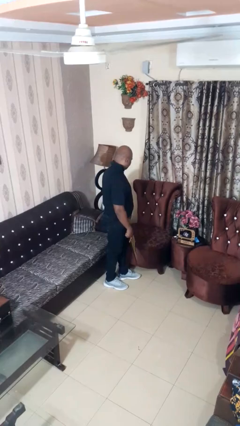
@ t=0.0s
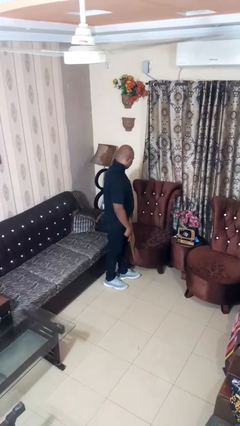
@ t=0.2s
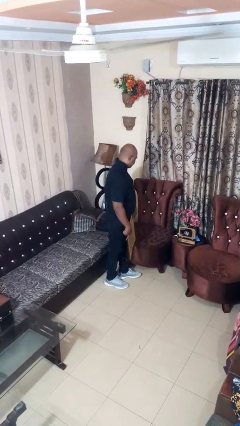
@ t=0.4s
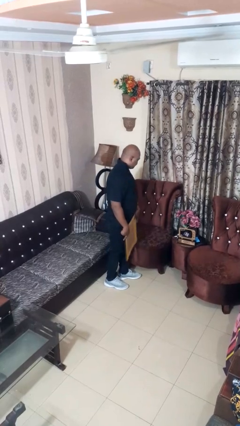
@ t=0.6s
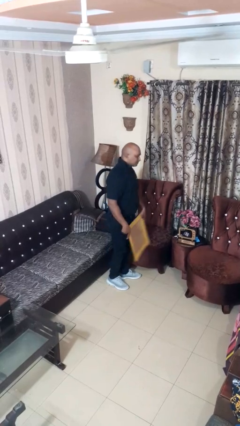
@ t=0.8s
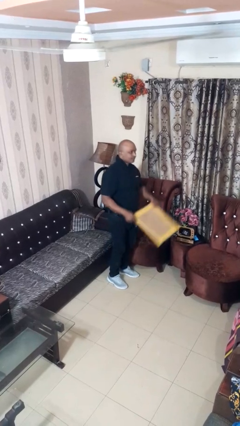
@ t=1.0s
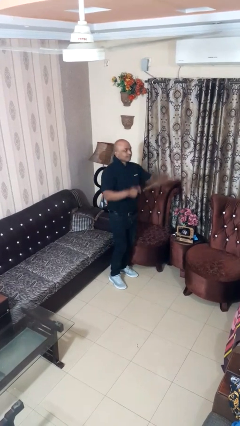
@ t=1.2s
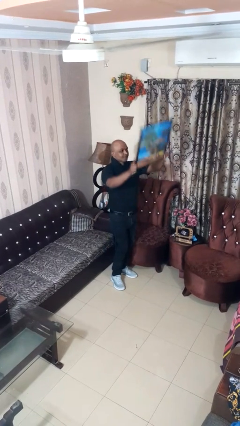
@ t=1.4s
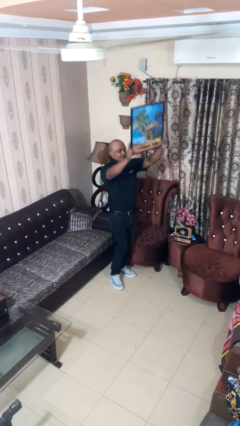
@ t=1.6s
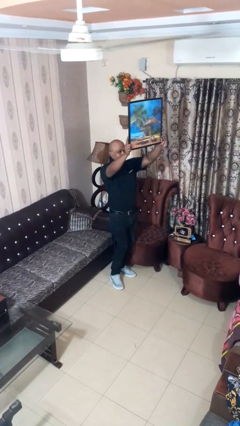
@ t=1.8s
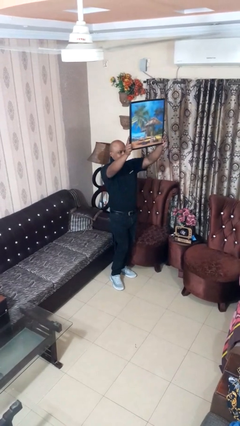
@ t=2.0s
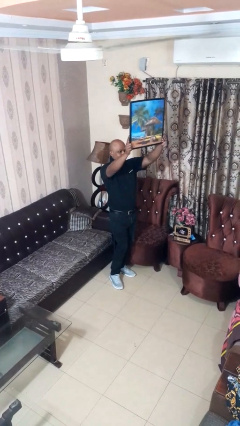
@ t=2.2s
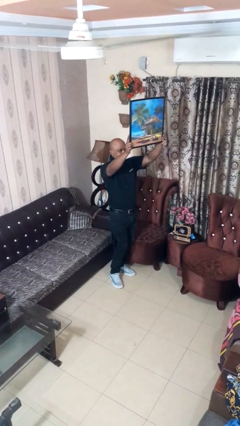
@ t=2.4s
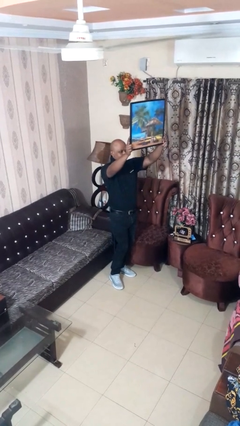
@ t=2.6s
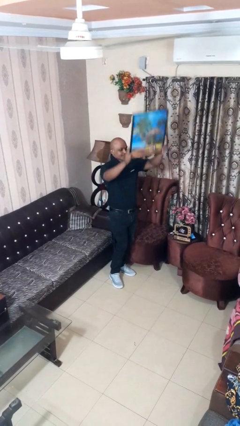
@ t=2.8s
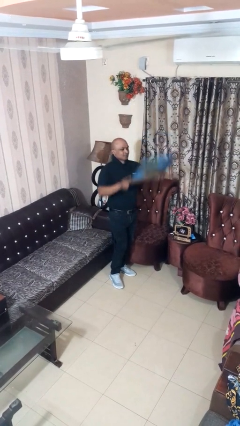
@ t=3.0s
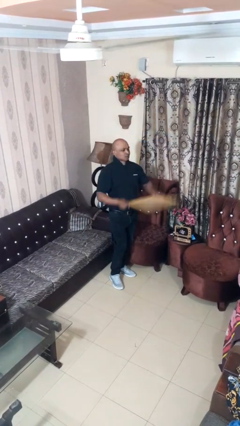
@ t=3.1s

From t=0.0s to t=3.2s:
person holds object above head

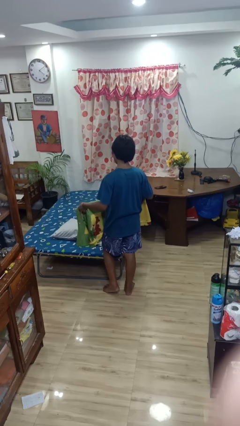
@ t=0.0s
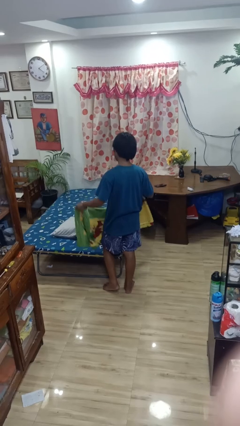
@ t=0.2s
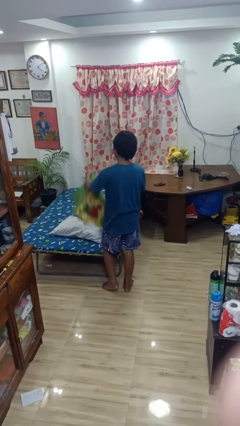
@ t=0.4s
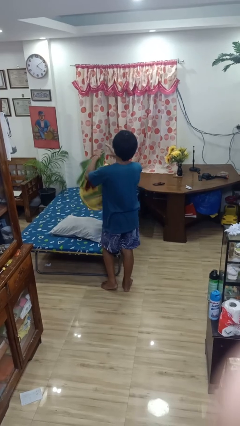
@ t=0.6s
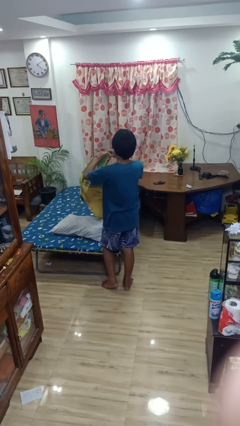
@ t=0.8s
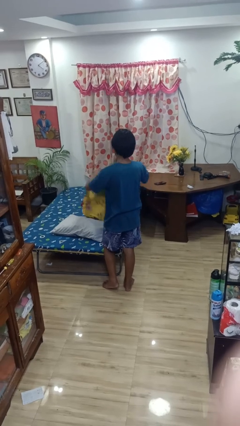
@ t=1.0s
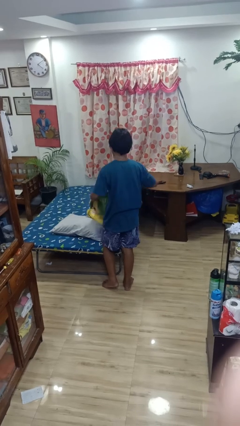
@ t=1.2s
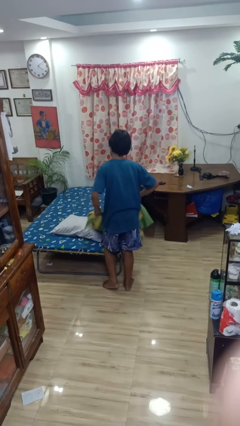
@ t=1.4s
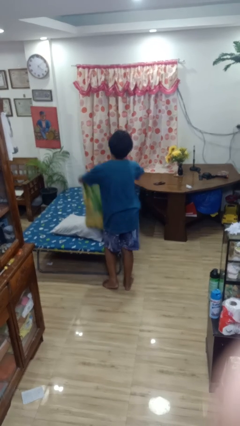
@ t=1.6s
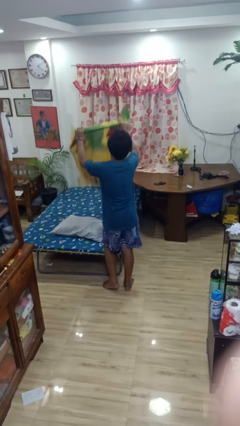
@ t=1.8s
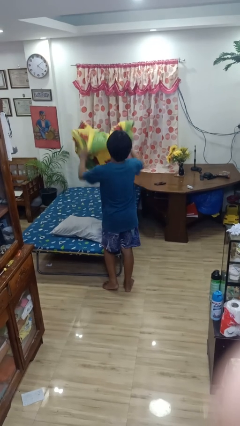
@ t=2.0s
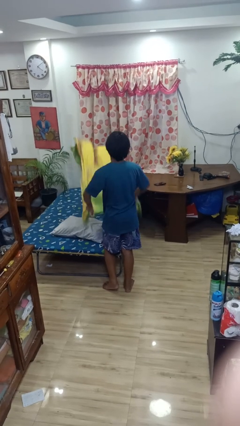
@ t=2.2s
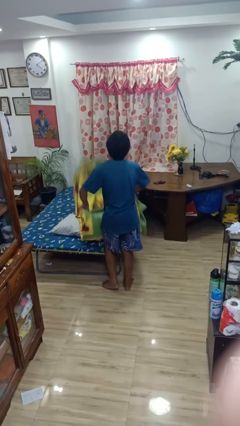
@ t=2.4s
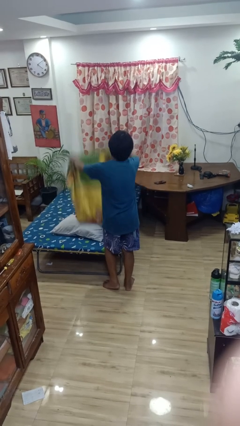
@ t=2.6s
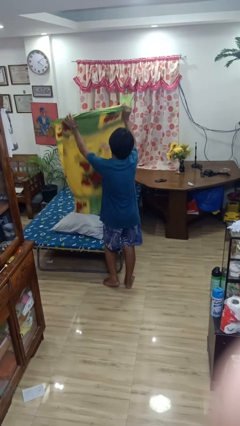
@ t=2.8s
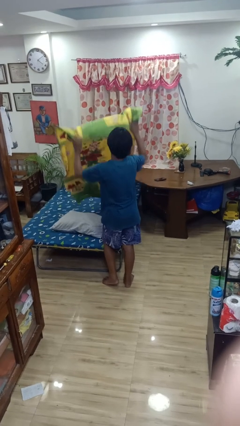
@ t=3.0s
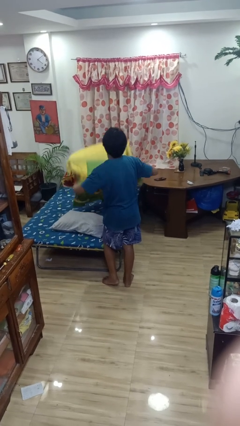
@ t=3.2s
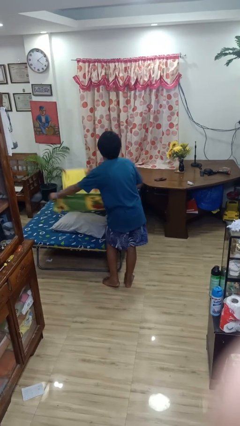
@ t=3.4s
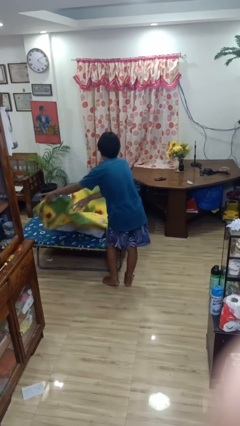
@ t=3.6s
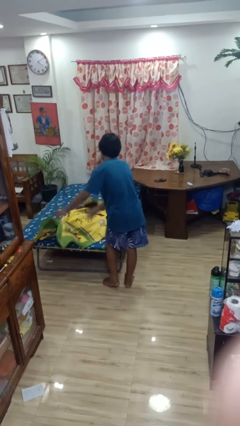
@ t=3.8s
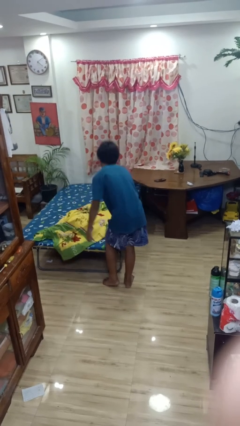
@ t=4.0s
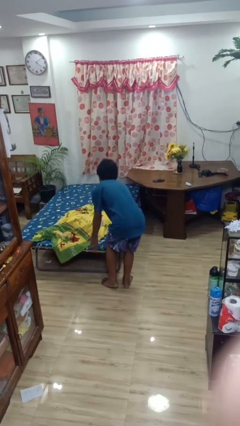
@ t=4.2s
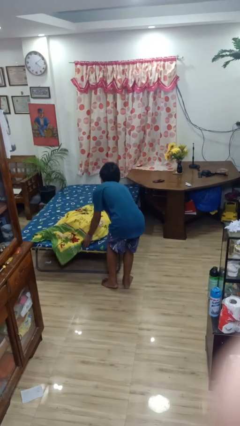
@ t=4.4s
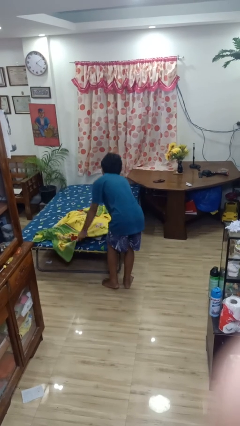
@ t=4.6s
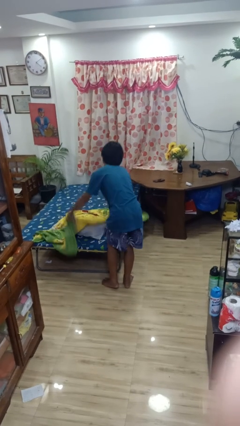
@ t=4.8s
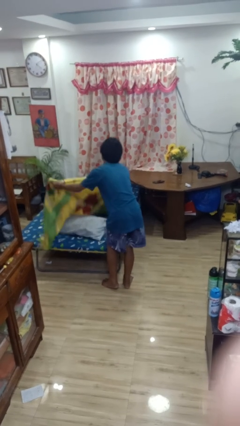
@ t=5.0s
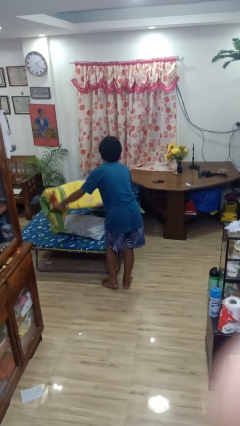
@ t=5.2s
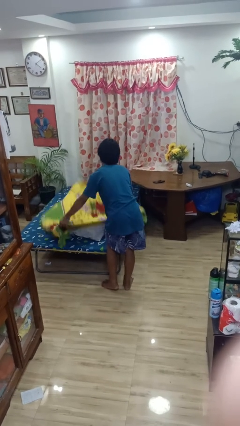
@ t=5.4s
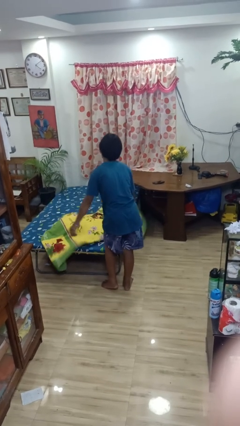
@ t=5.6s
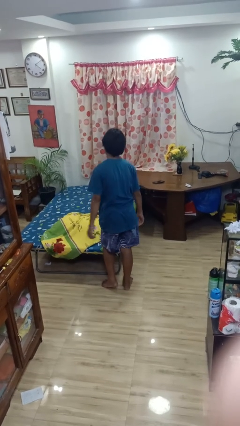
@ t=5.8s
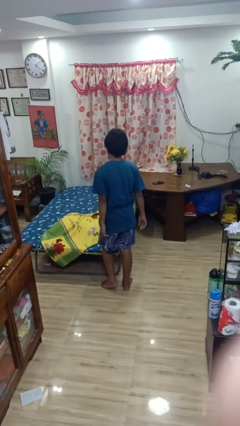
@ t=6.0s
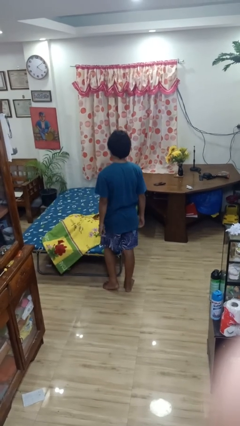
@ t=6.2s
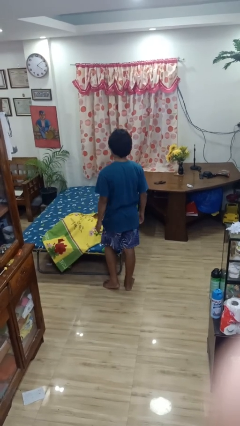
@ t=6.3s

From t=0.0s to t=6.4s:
person unfolds blanket

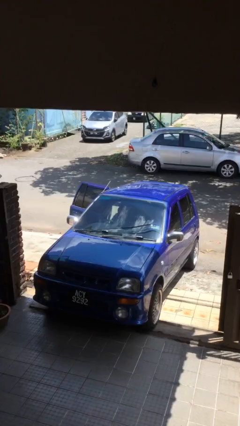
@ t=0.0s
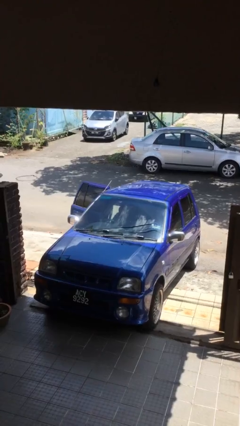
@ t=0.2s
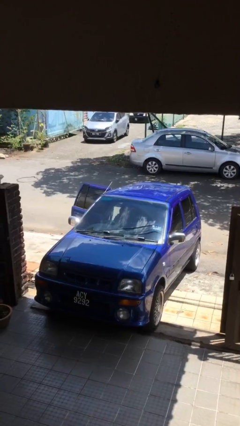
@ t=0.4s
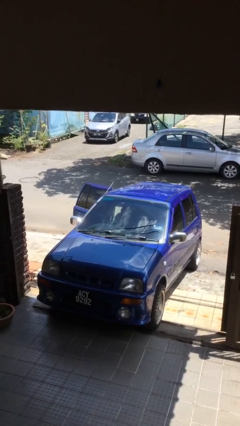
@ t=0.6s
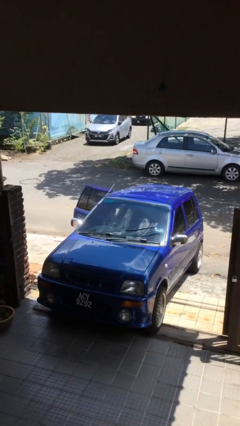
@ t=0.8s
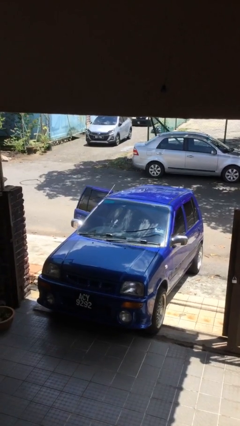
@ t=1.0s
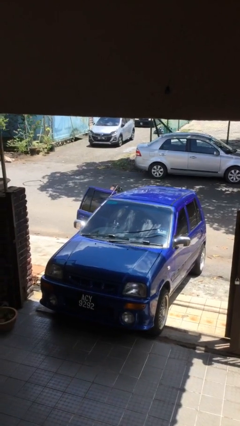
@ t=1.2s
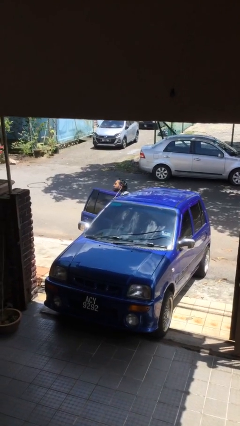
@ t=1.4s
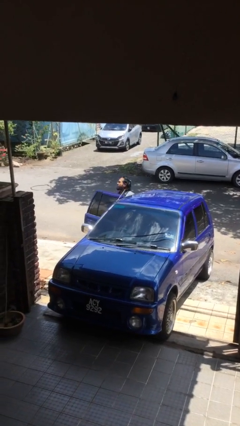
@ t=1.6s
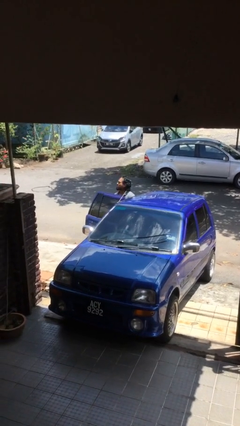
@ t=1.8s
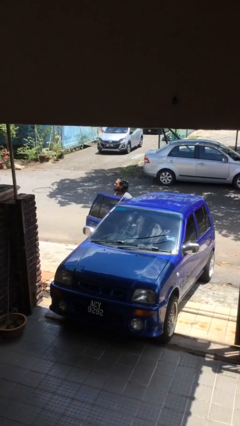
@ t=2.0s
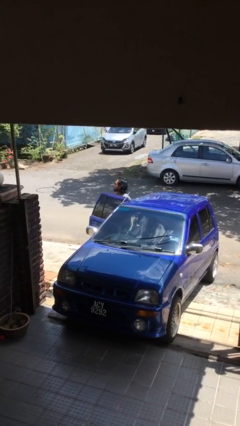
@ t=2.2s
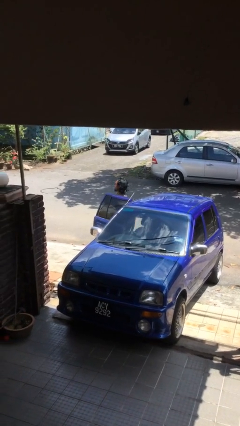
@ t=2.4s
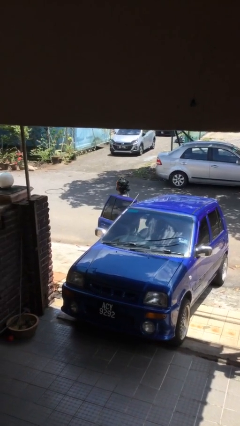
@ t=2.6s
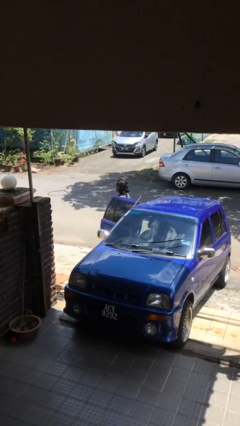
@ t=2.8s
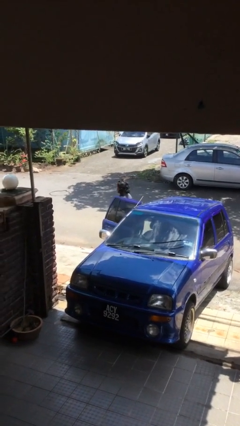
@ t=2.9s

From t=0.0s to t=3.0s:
person exits car

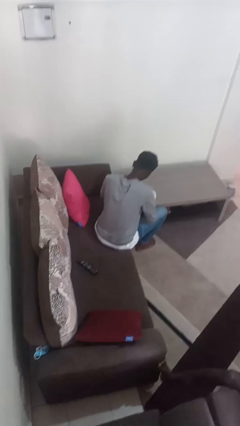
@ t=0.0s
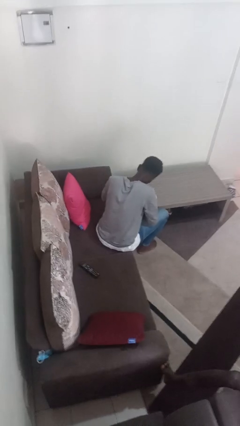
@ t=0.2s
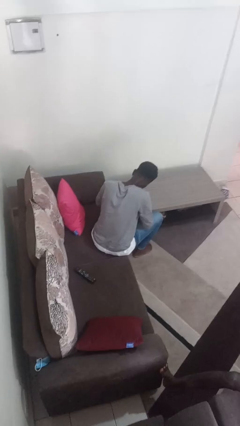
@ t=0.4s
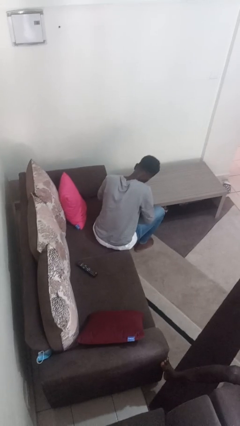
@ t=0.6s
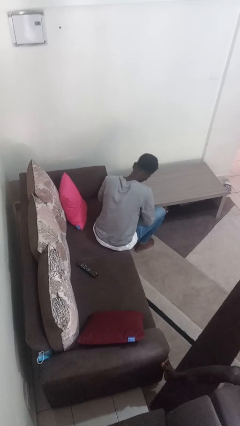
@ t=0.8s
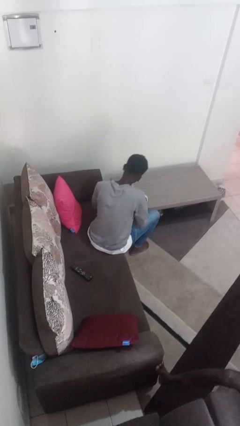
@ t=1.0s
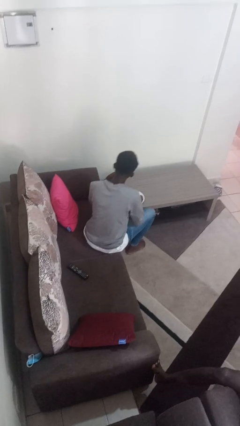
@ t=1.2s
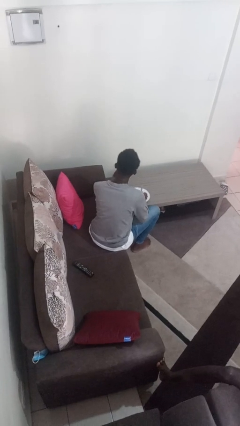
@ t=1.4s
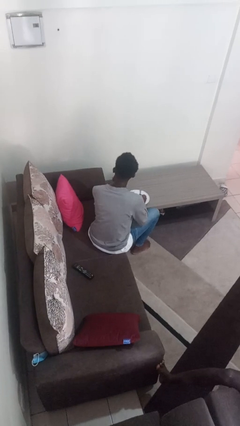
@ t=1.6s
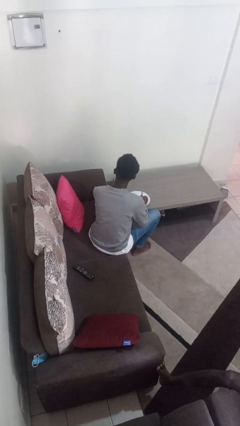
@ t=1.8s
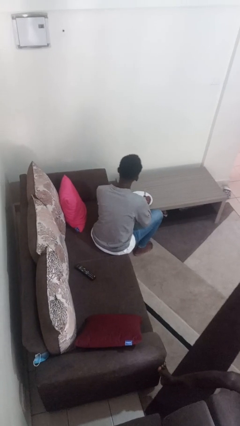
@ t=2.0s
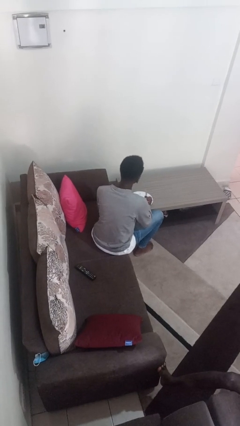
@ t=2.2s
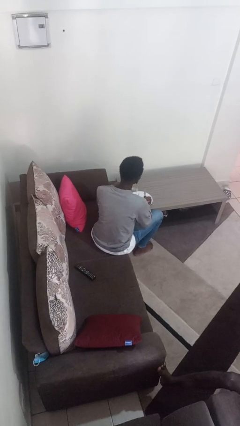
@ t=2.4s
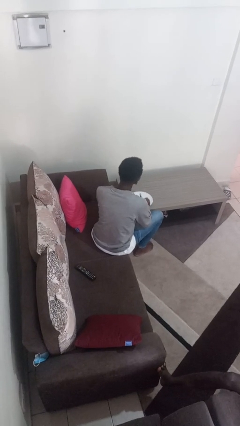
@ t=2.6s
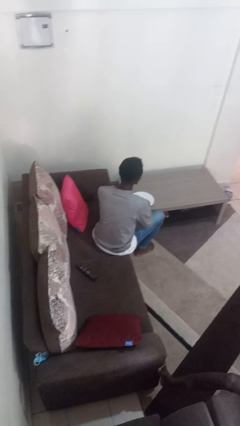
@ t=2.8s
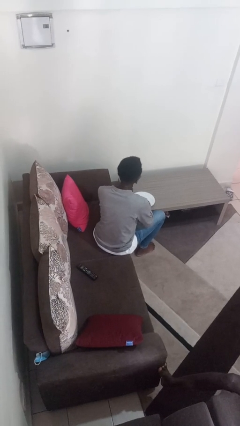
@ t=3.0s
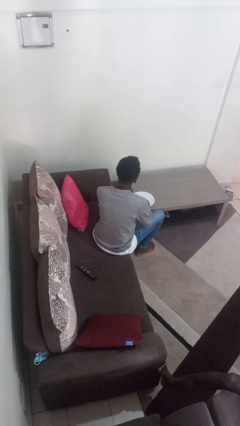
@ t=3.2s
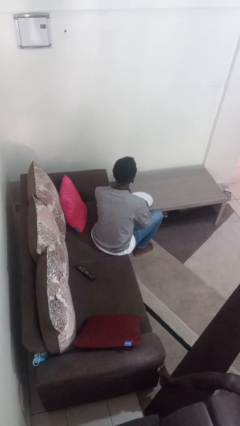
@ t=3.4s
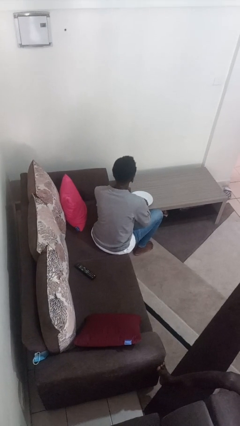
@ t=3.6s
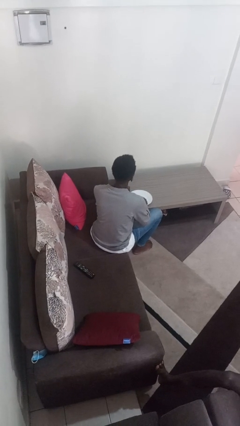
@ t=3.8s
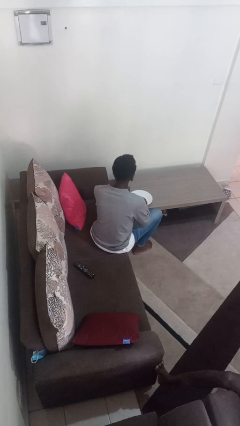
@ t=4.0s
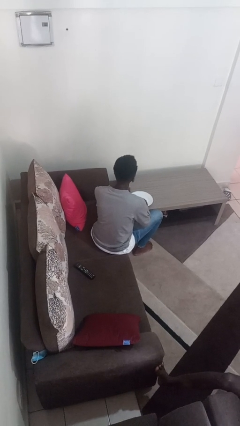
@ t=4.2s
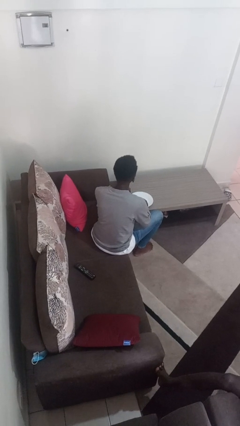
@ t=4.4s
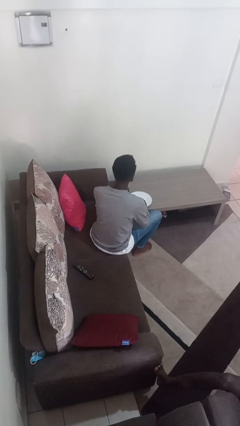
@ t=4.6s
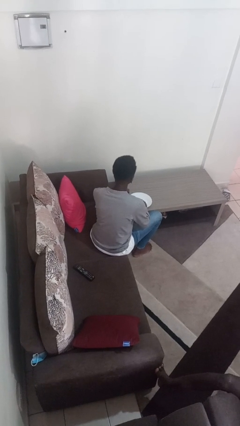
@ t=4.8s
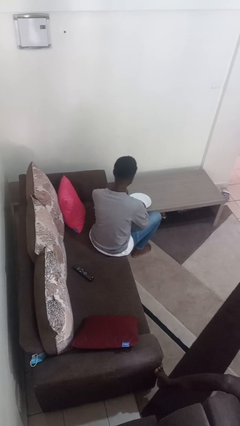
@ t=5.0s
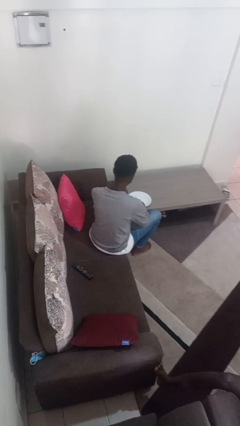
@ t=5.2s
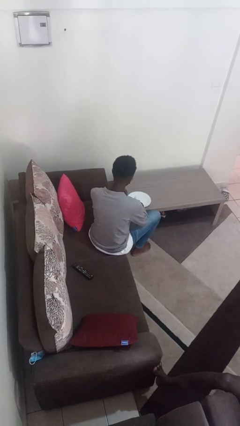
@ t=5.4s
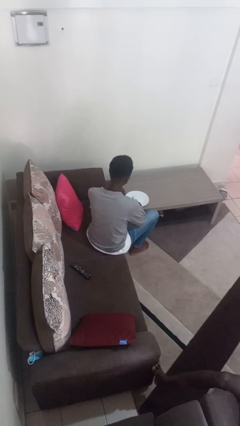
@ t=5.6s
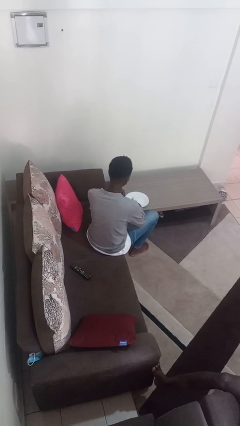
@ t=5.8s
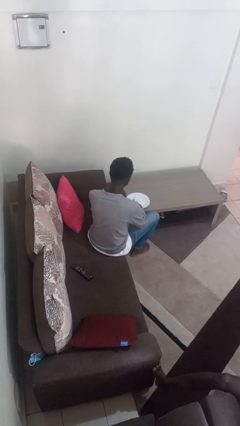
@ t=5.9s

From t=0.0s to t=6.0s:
person eats with utensil
